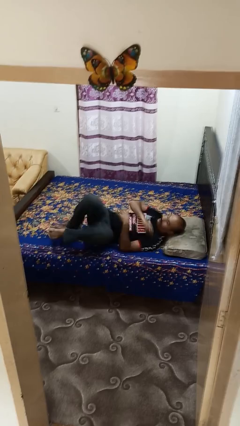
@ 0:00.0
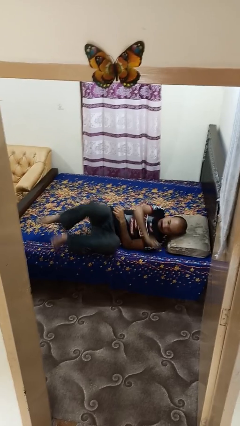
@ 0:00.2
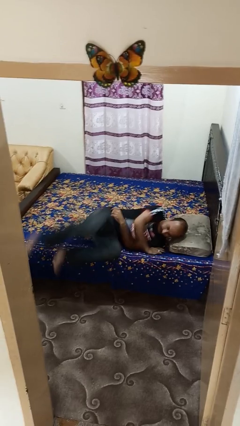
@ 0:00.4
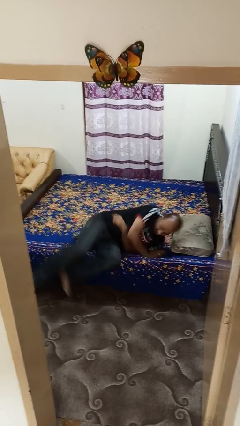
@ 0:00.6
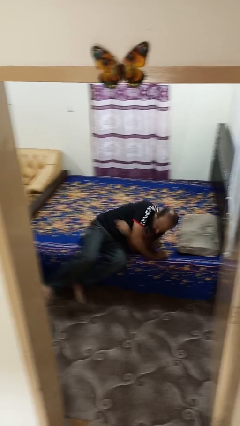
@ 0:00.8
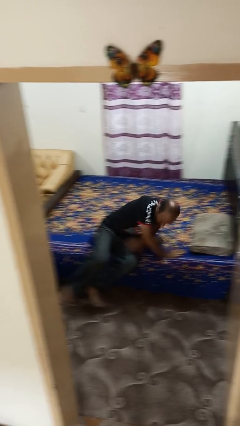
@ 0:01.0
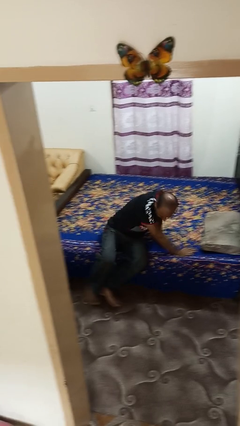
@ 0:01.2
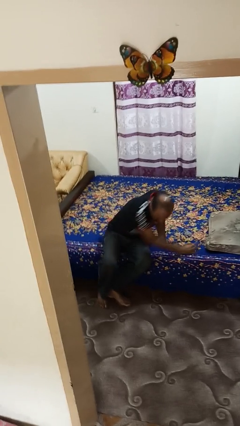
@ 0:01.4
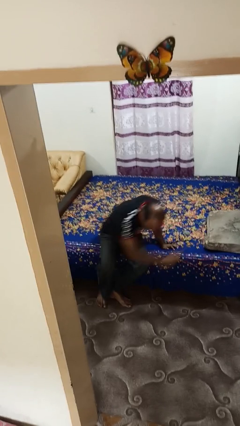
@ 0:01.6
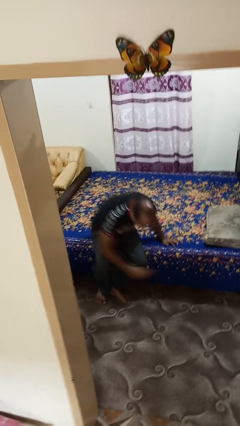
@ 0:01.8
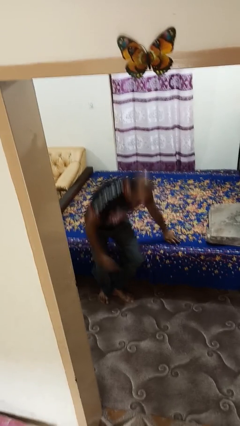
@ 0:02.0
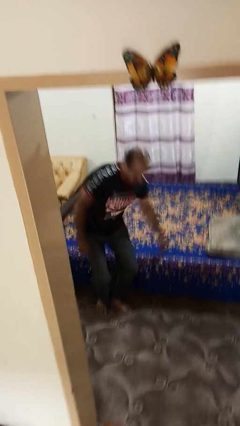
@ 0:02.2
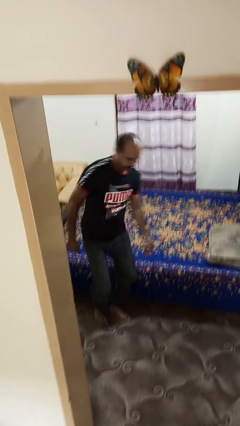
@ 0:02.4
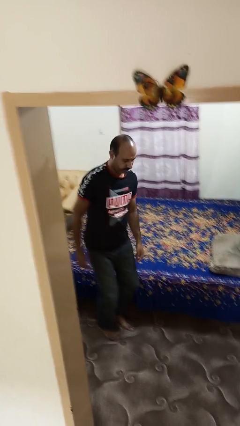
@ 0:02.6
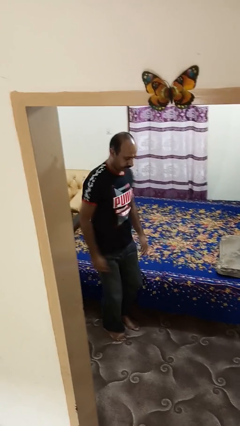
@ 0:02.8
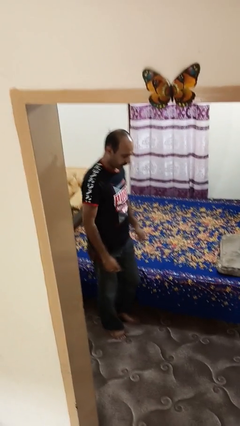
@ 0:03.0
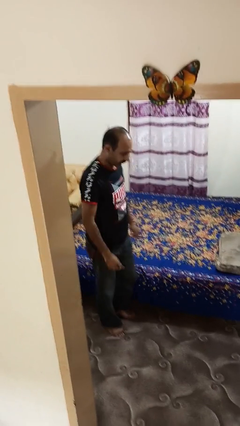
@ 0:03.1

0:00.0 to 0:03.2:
person stands up

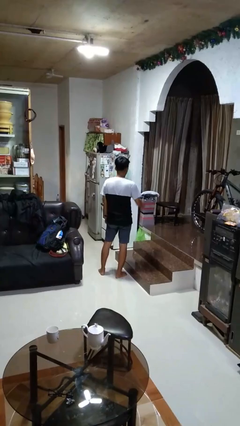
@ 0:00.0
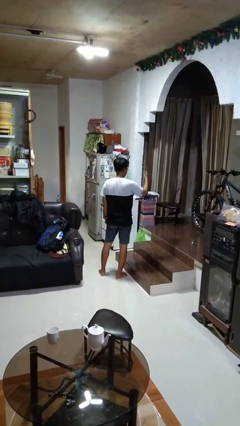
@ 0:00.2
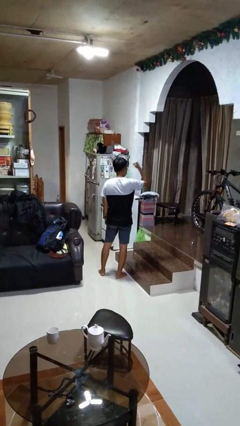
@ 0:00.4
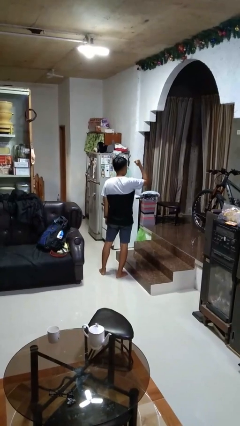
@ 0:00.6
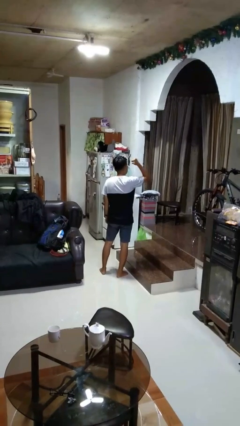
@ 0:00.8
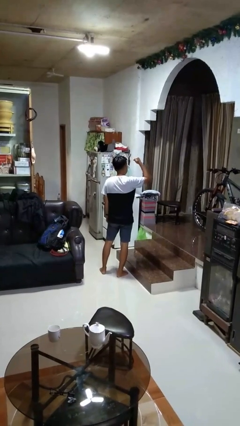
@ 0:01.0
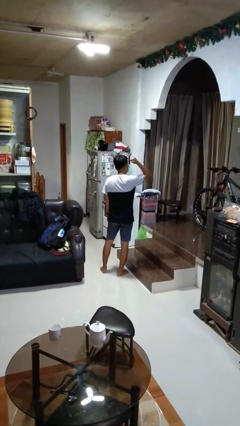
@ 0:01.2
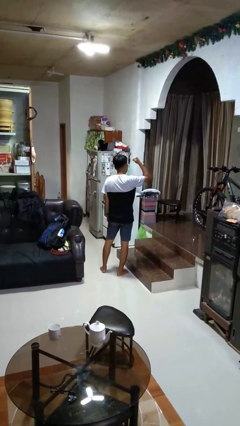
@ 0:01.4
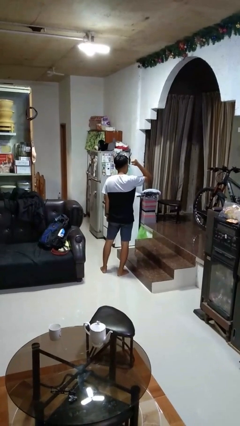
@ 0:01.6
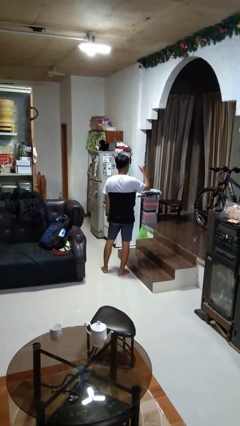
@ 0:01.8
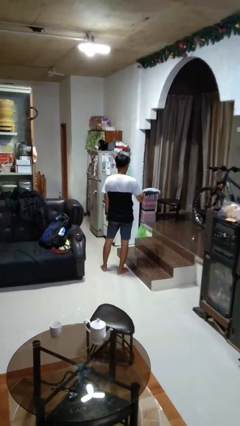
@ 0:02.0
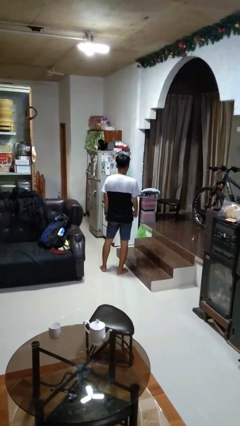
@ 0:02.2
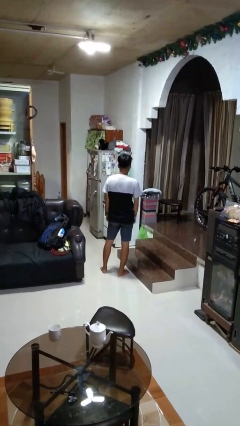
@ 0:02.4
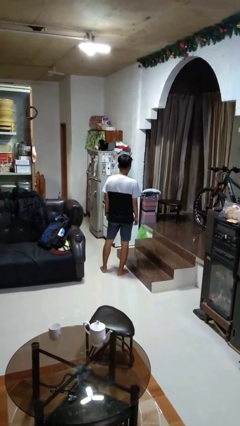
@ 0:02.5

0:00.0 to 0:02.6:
person gestures behind me

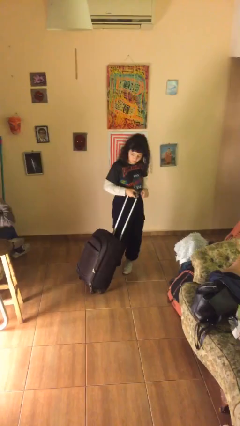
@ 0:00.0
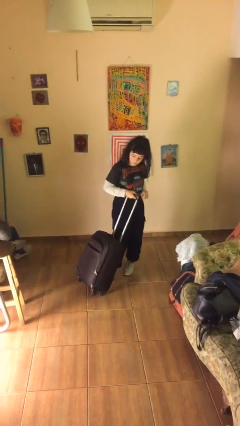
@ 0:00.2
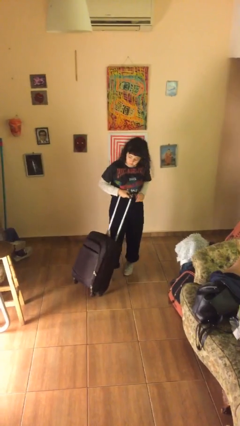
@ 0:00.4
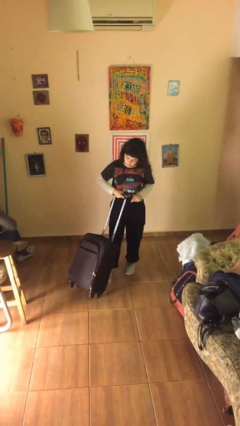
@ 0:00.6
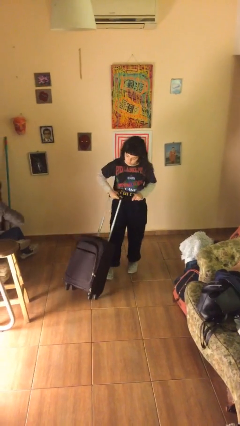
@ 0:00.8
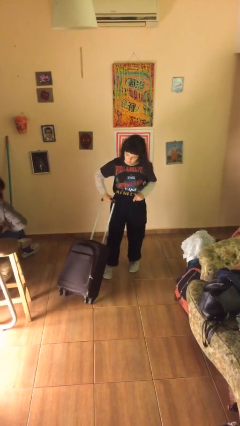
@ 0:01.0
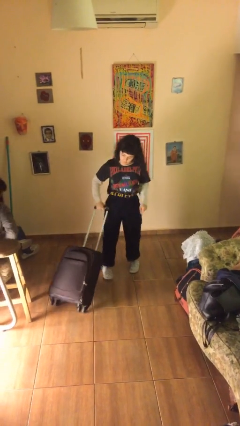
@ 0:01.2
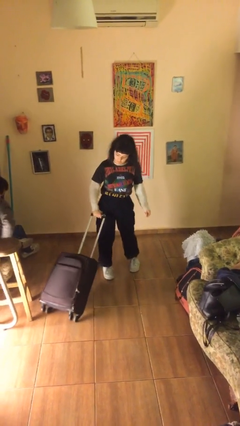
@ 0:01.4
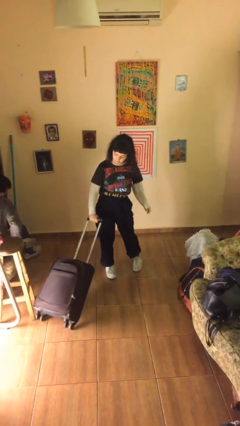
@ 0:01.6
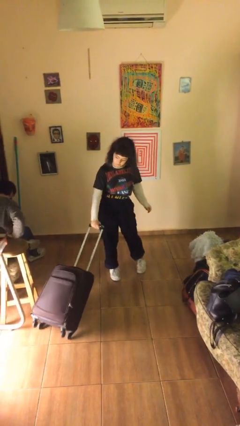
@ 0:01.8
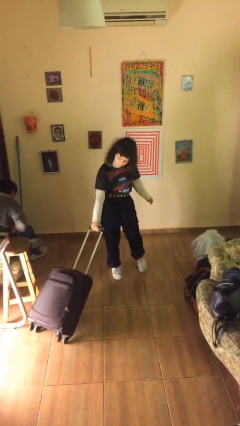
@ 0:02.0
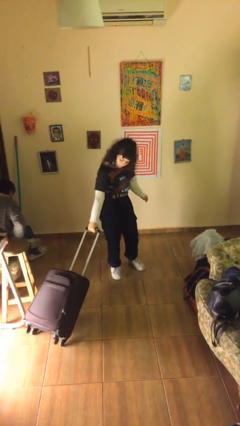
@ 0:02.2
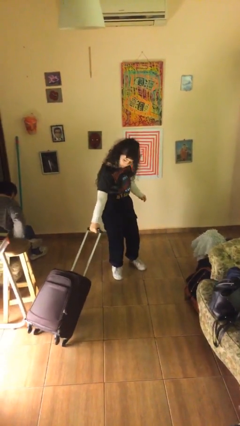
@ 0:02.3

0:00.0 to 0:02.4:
person pushes wheeled cart

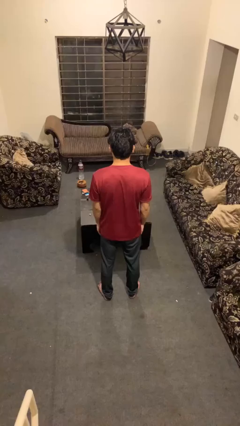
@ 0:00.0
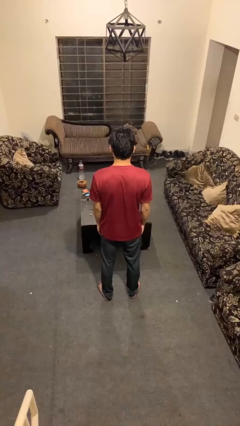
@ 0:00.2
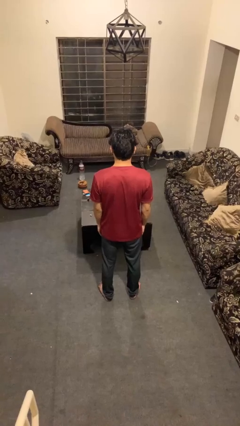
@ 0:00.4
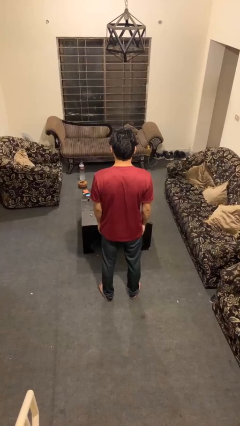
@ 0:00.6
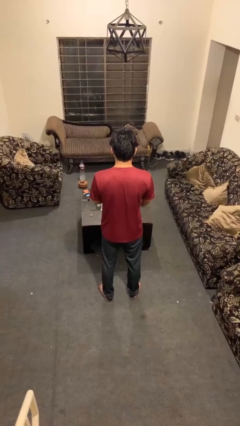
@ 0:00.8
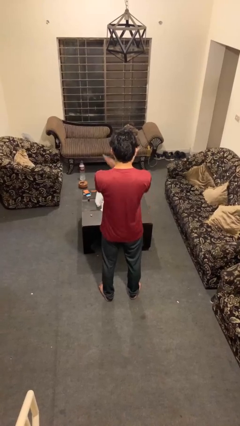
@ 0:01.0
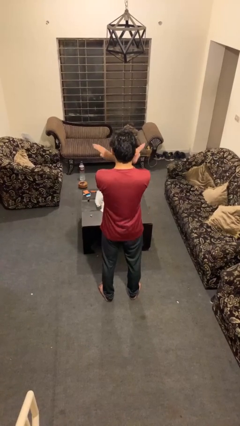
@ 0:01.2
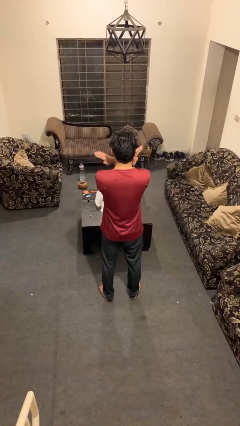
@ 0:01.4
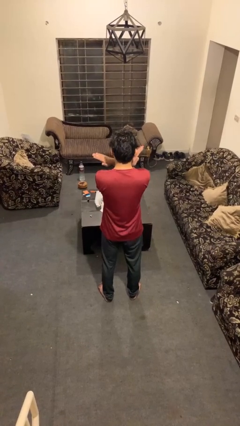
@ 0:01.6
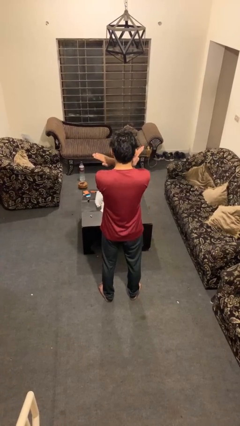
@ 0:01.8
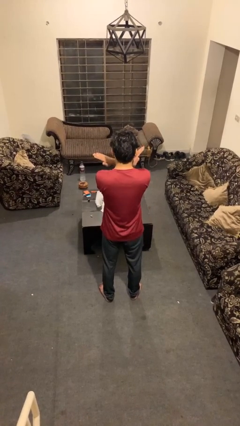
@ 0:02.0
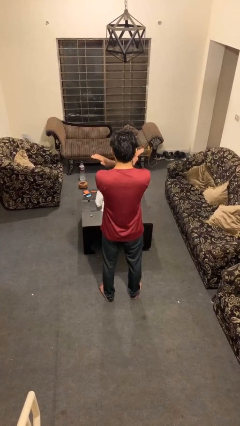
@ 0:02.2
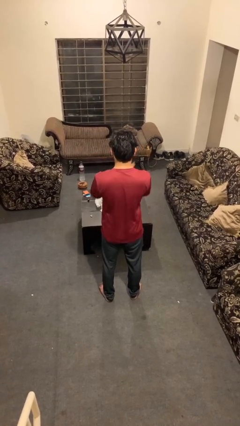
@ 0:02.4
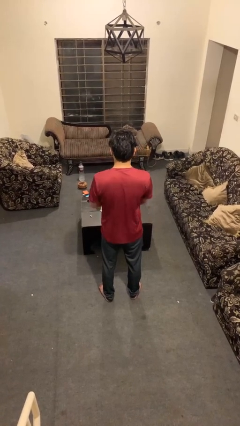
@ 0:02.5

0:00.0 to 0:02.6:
person gestures arms x

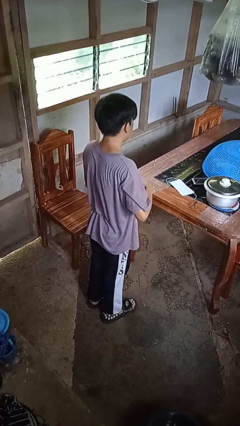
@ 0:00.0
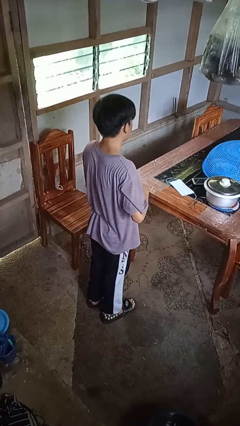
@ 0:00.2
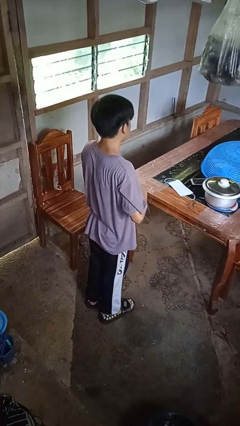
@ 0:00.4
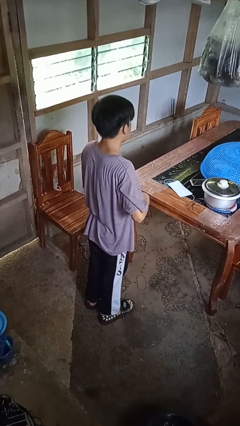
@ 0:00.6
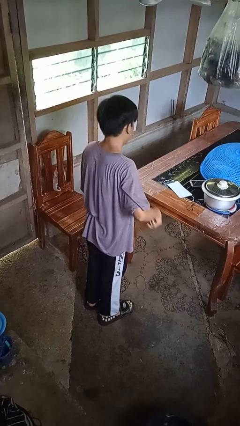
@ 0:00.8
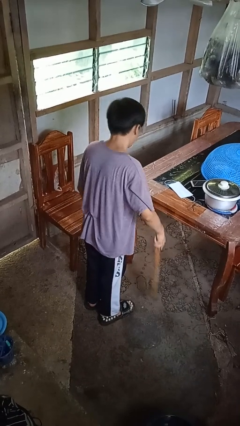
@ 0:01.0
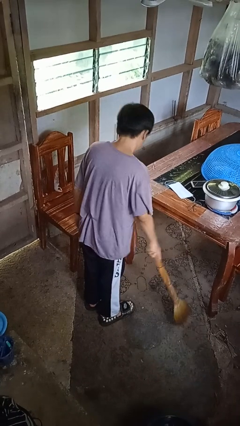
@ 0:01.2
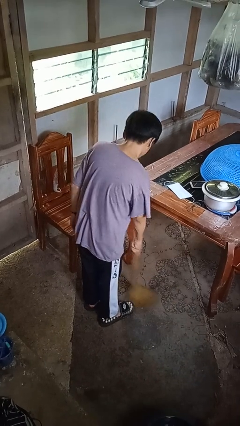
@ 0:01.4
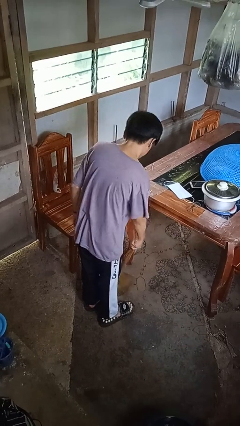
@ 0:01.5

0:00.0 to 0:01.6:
person sweeps floor

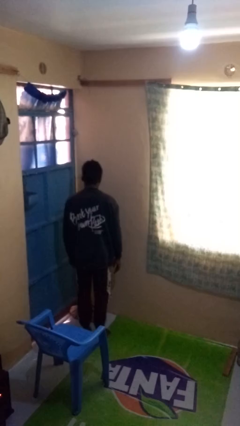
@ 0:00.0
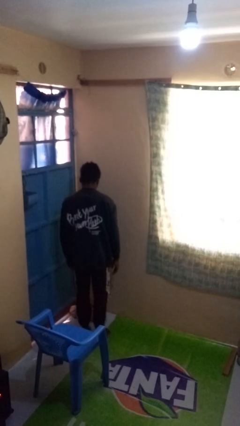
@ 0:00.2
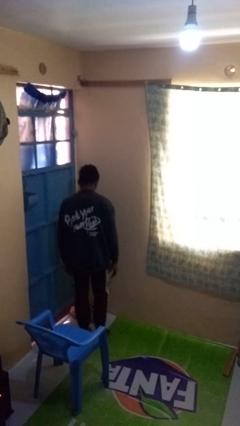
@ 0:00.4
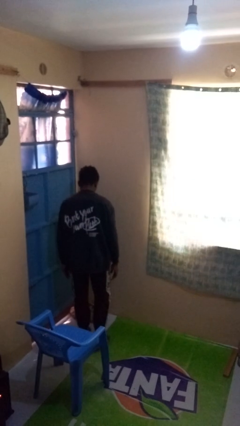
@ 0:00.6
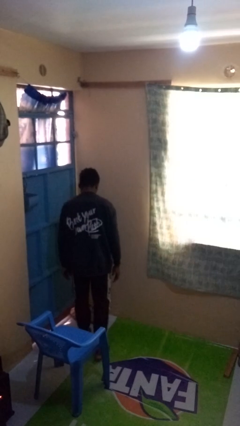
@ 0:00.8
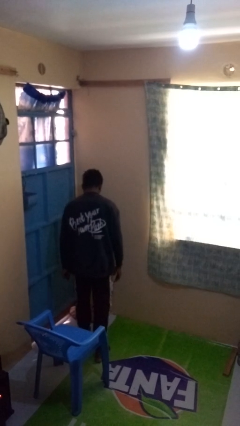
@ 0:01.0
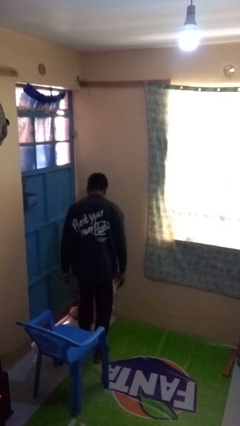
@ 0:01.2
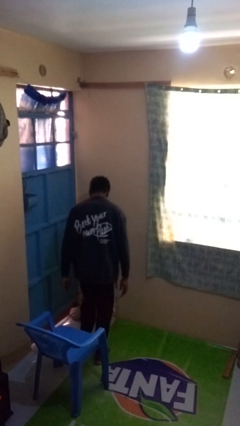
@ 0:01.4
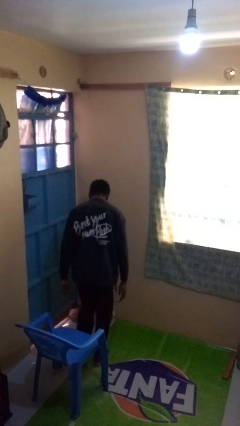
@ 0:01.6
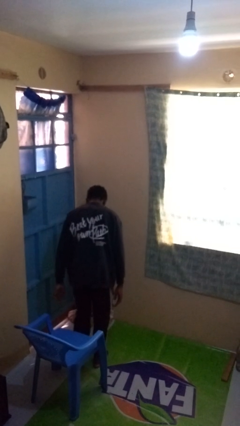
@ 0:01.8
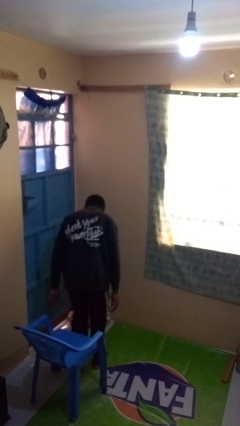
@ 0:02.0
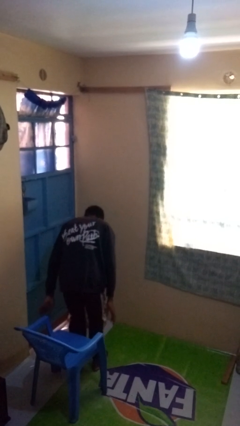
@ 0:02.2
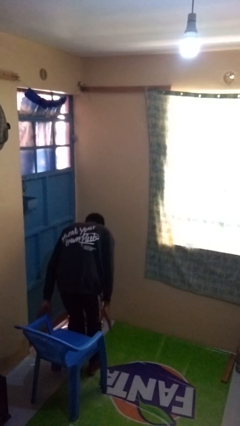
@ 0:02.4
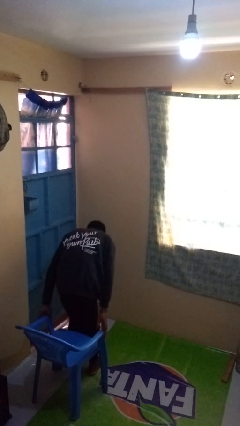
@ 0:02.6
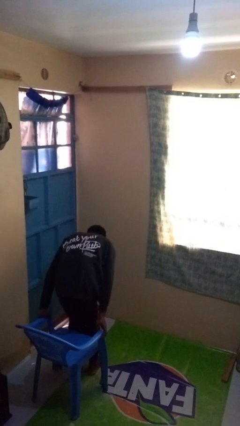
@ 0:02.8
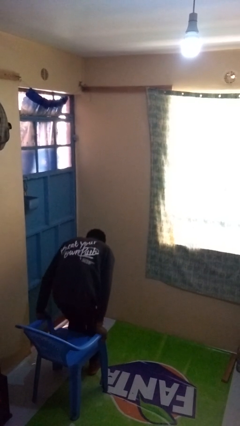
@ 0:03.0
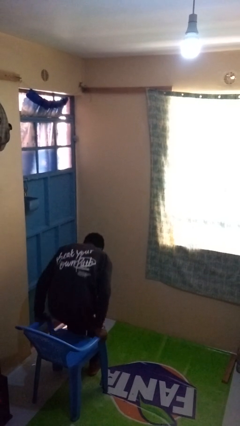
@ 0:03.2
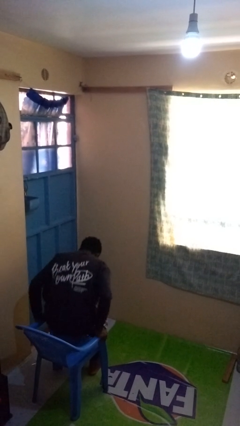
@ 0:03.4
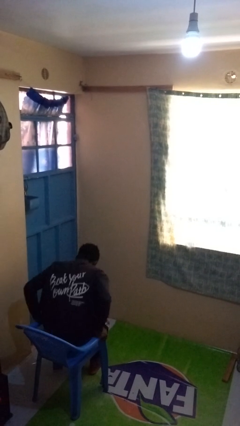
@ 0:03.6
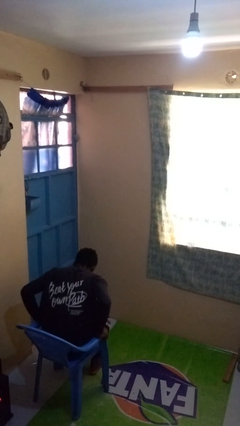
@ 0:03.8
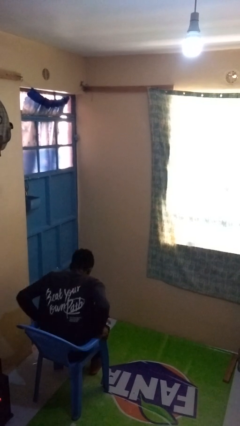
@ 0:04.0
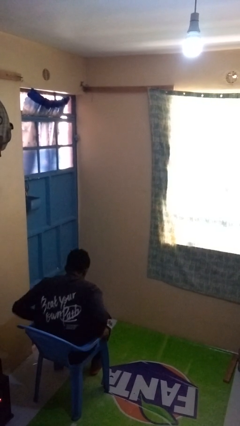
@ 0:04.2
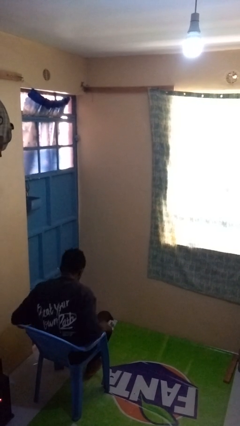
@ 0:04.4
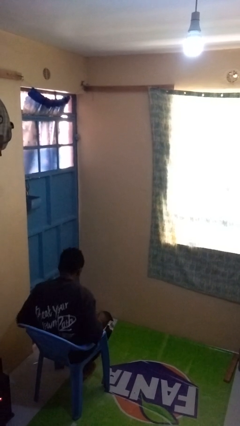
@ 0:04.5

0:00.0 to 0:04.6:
person sits down
